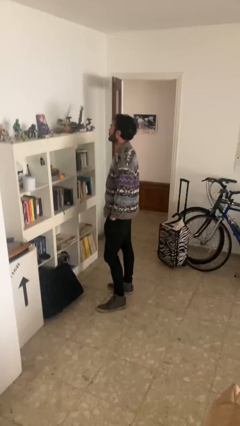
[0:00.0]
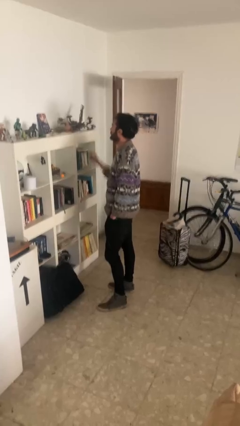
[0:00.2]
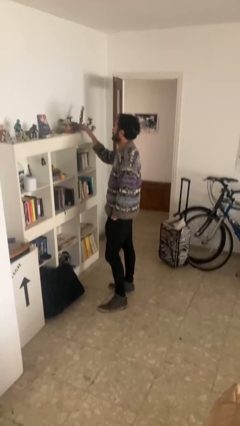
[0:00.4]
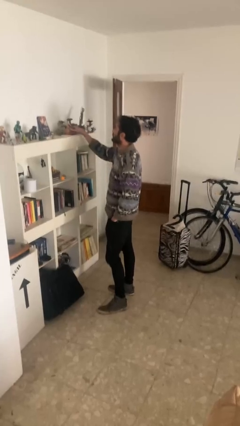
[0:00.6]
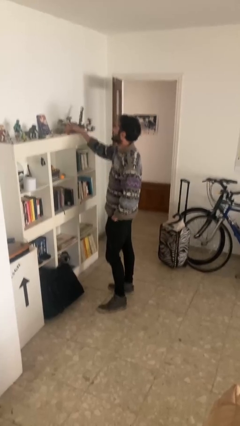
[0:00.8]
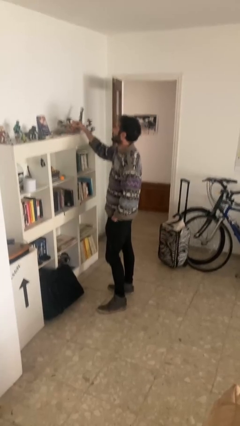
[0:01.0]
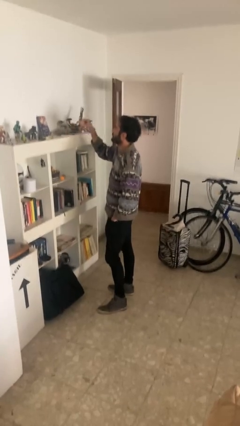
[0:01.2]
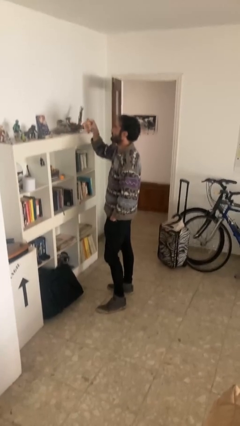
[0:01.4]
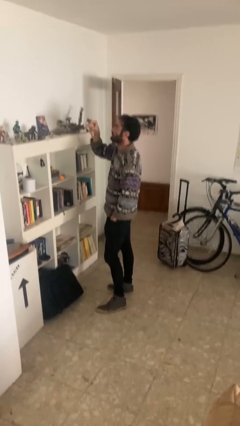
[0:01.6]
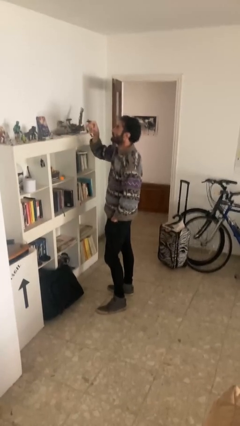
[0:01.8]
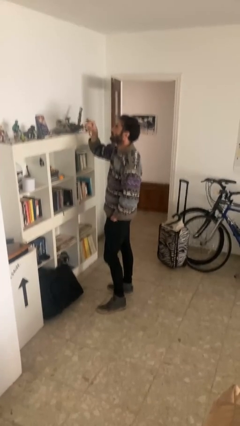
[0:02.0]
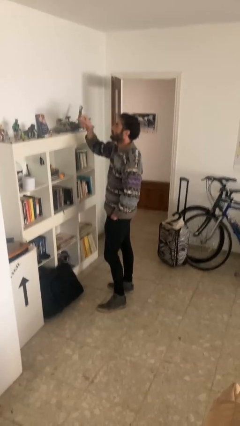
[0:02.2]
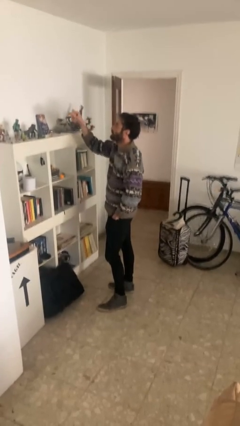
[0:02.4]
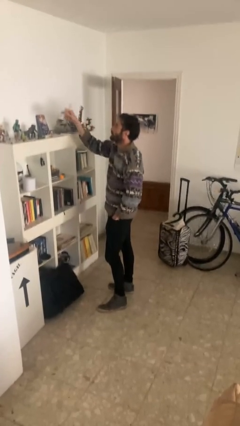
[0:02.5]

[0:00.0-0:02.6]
person picks up object from shelf

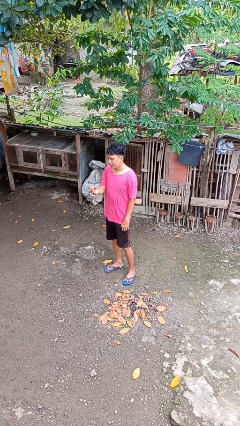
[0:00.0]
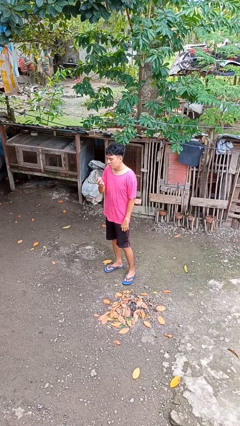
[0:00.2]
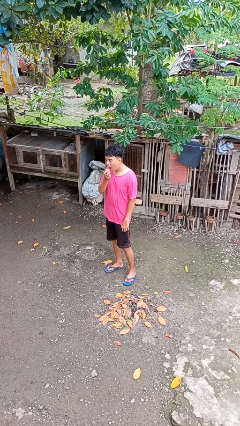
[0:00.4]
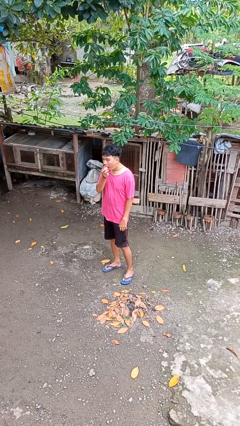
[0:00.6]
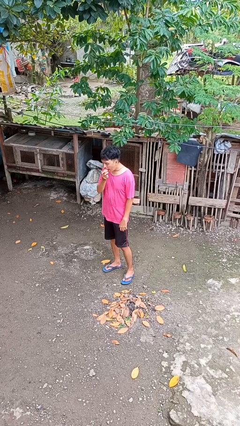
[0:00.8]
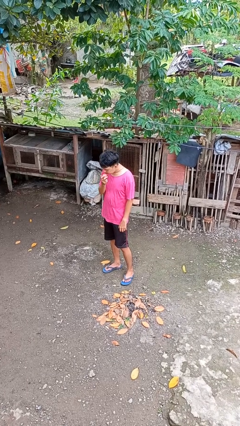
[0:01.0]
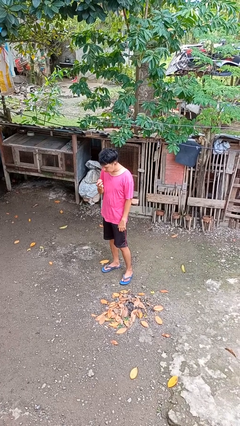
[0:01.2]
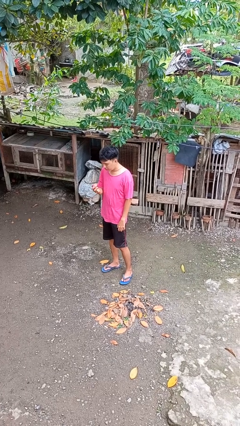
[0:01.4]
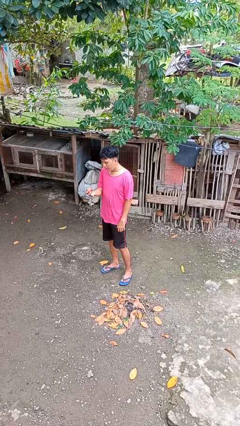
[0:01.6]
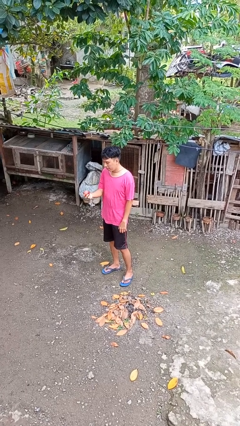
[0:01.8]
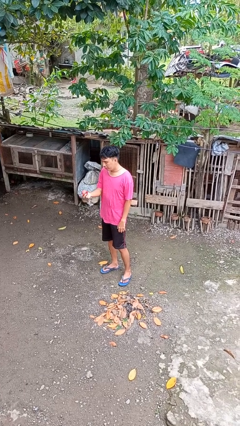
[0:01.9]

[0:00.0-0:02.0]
person eats apple

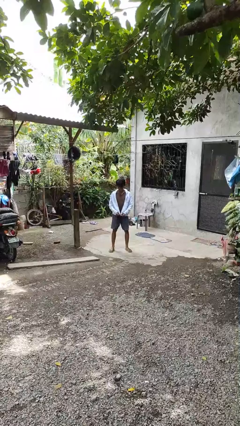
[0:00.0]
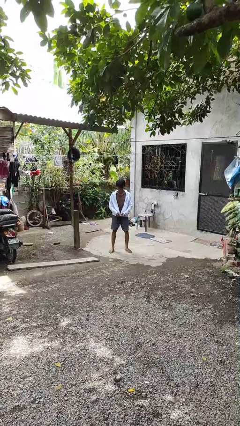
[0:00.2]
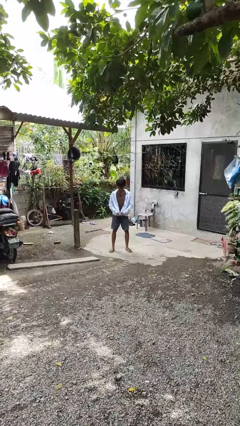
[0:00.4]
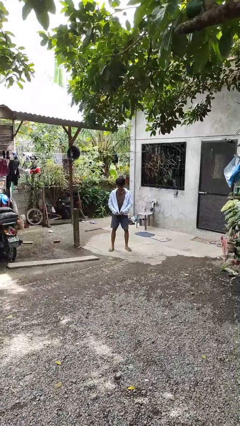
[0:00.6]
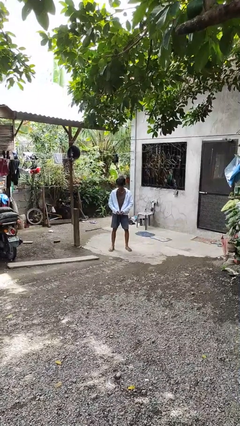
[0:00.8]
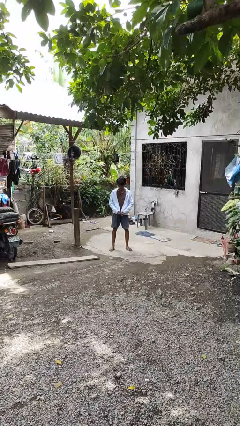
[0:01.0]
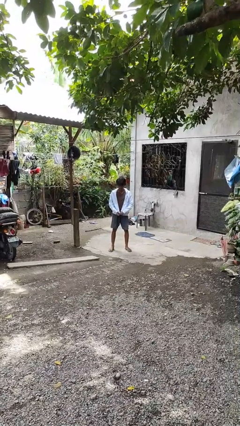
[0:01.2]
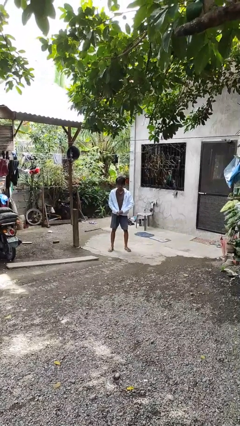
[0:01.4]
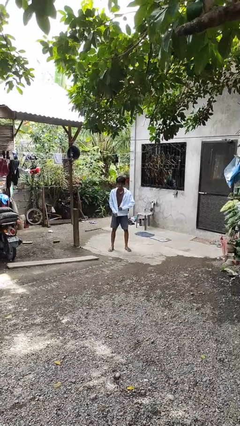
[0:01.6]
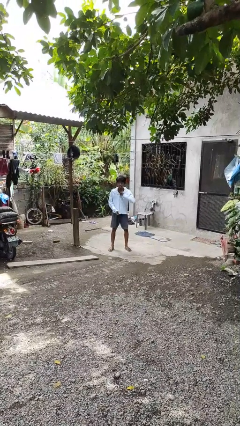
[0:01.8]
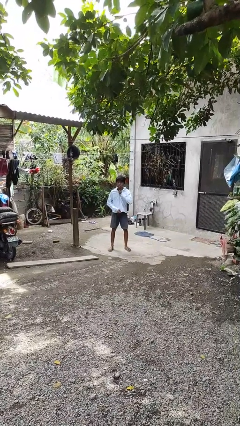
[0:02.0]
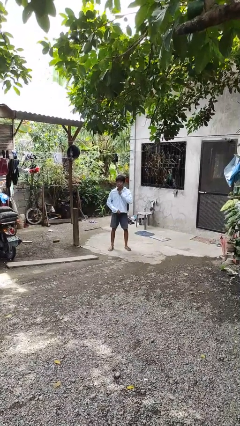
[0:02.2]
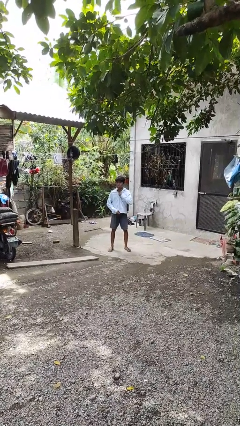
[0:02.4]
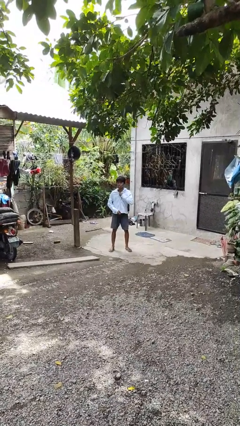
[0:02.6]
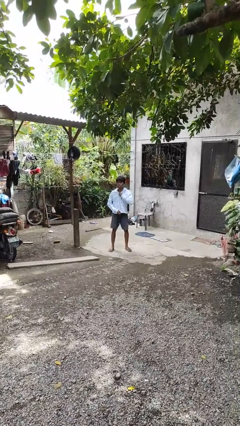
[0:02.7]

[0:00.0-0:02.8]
person zips up jacket

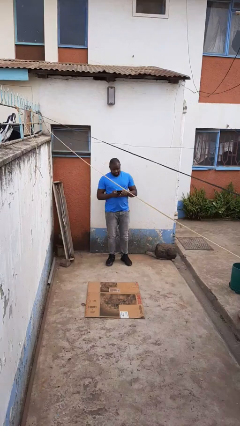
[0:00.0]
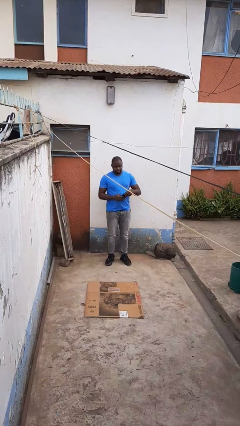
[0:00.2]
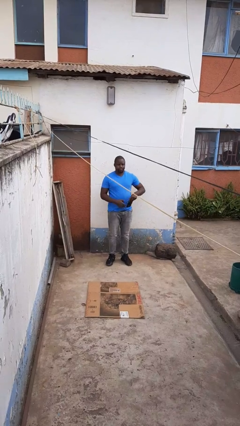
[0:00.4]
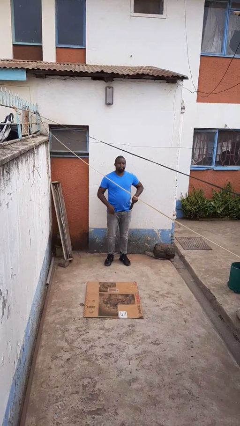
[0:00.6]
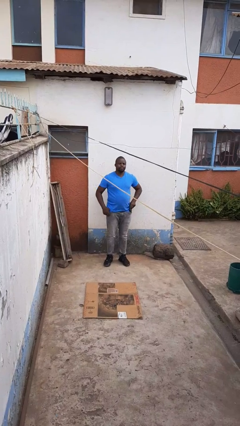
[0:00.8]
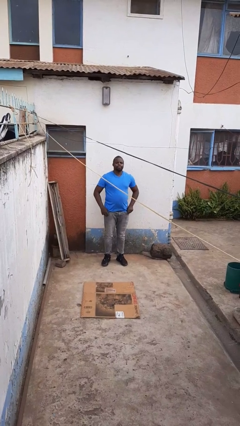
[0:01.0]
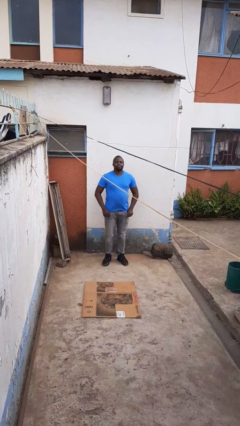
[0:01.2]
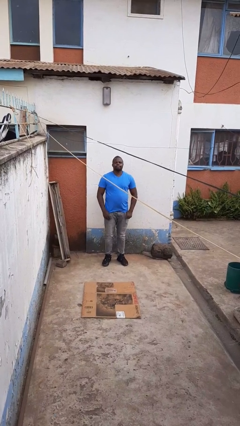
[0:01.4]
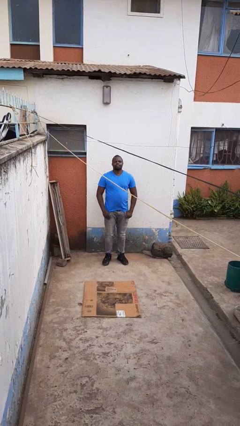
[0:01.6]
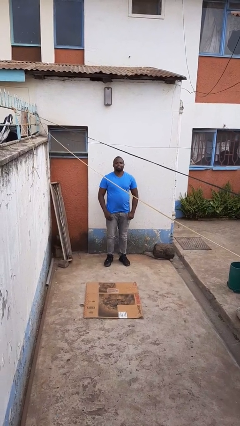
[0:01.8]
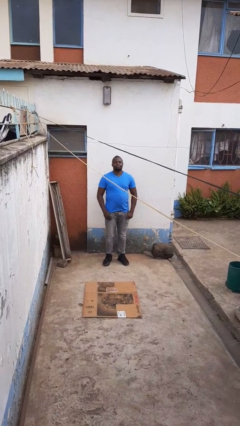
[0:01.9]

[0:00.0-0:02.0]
person puts phone into pocket

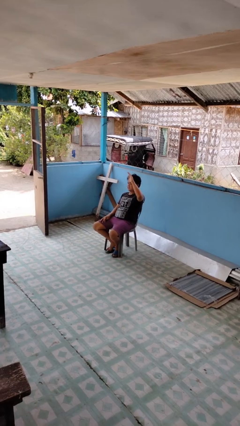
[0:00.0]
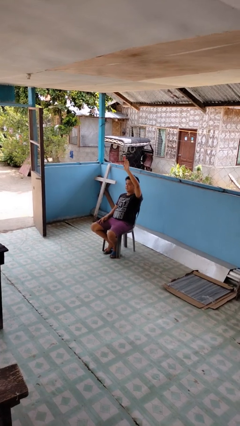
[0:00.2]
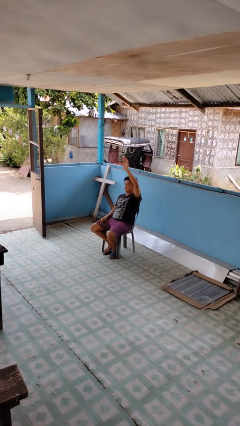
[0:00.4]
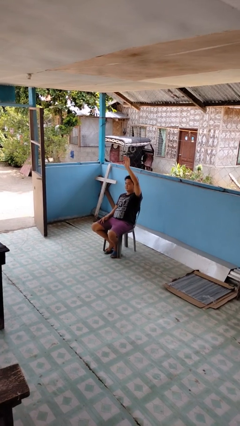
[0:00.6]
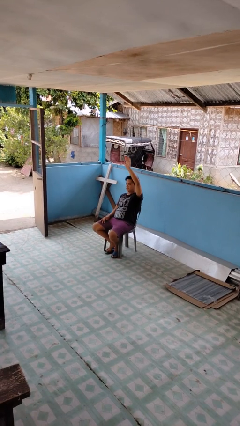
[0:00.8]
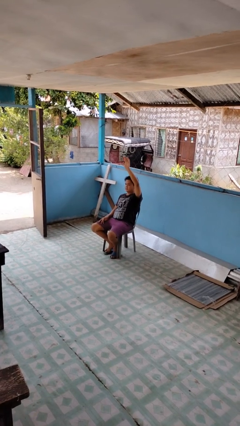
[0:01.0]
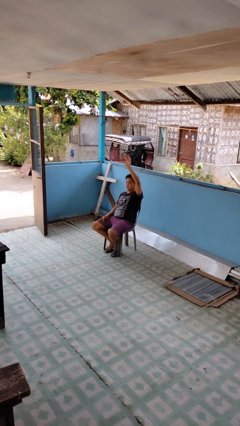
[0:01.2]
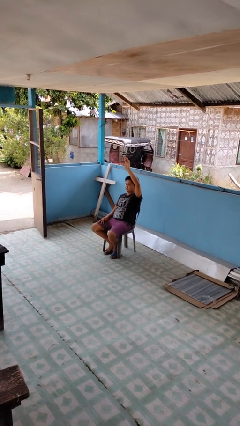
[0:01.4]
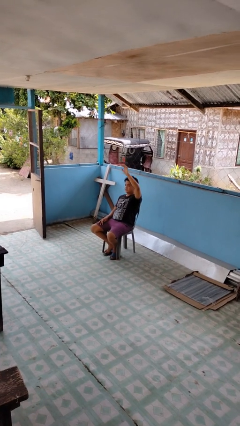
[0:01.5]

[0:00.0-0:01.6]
person gestures raise hand

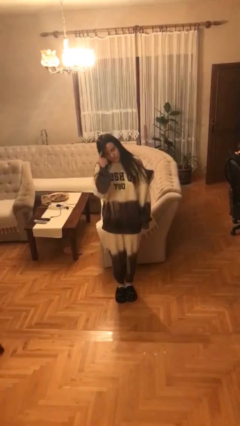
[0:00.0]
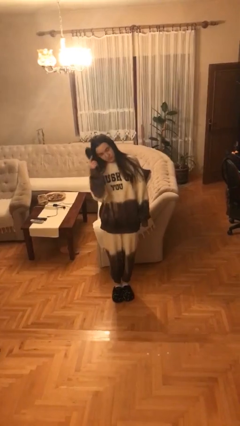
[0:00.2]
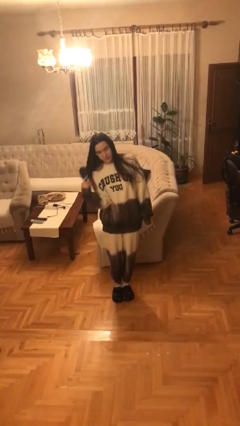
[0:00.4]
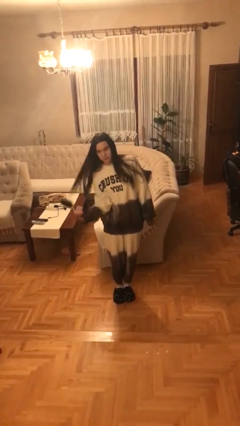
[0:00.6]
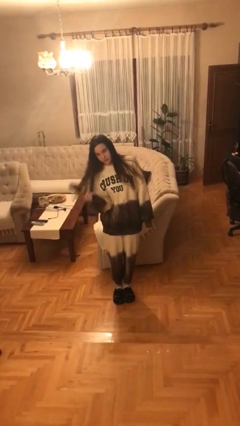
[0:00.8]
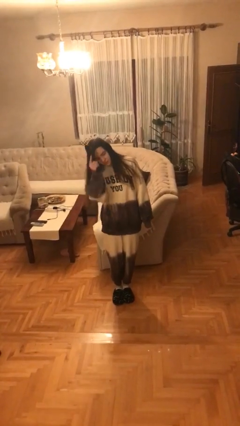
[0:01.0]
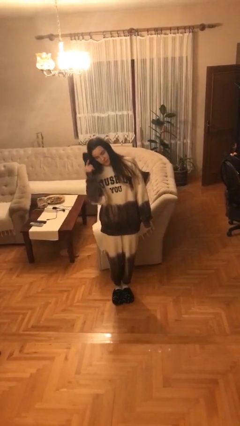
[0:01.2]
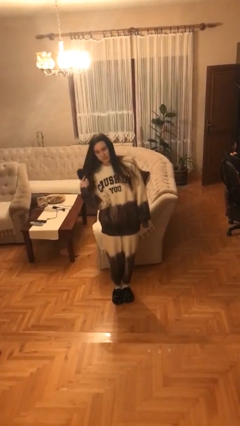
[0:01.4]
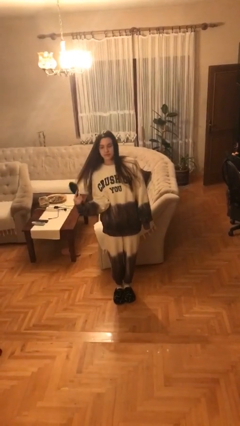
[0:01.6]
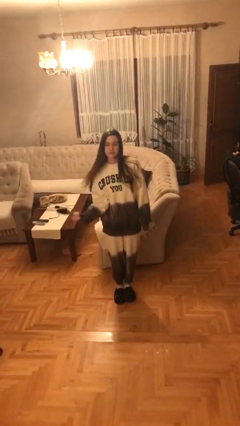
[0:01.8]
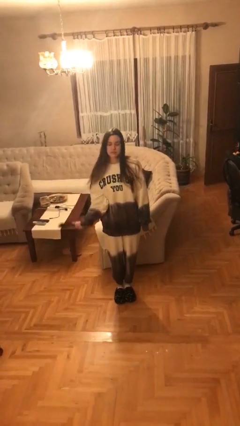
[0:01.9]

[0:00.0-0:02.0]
person brushes hair

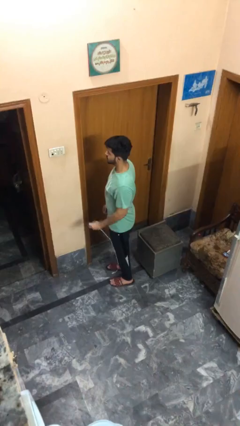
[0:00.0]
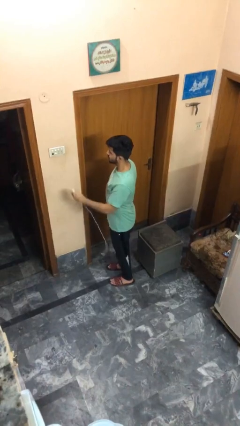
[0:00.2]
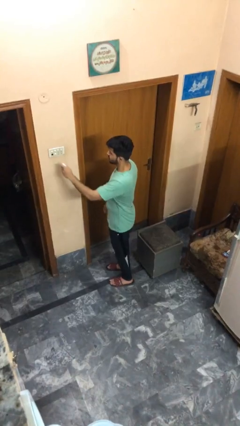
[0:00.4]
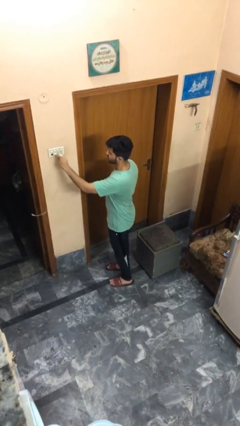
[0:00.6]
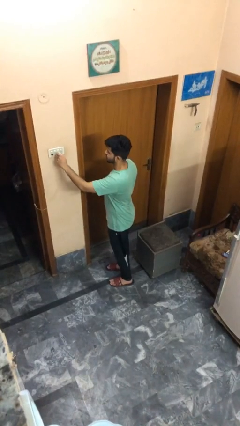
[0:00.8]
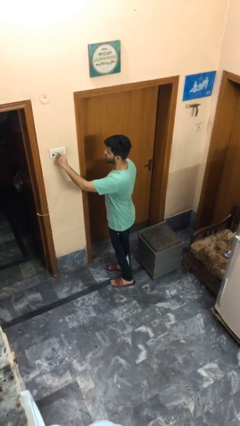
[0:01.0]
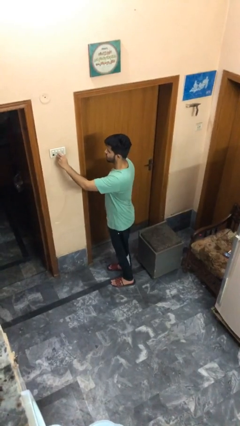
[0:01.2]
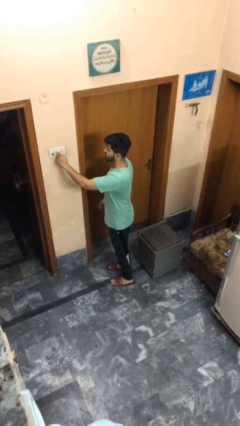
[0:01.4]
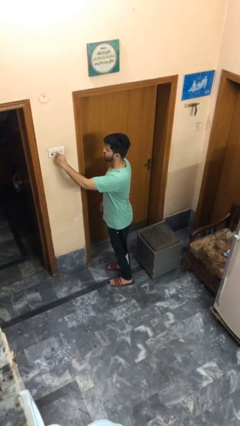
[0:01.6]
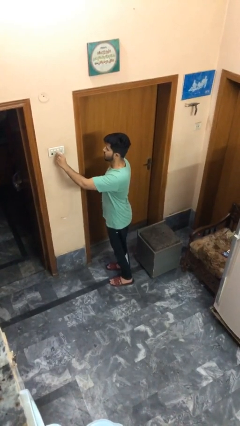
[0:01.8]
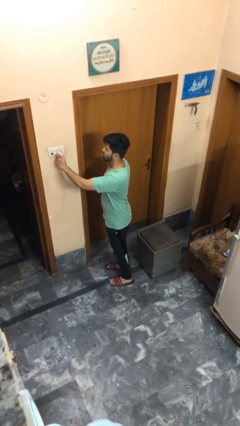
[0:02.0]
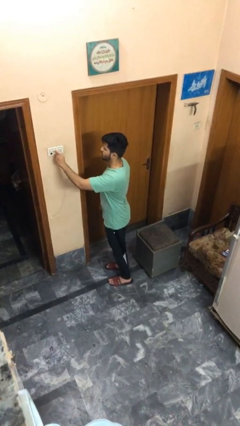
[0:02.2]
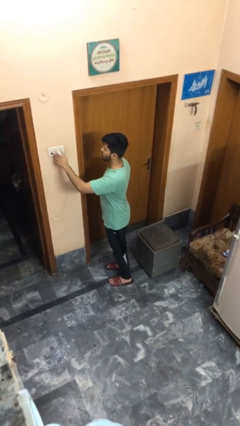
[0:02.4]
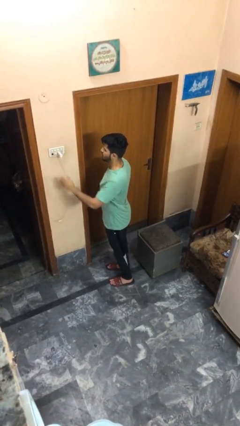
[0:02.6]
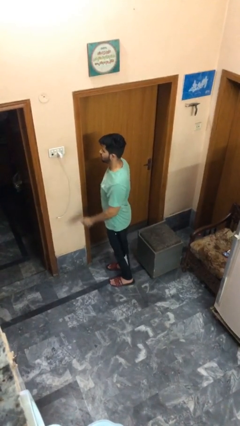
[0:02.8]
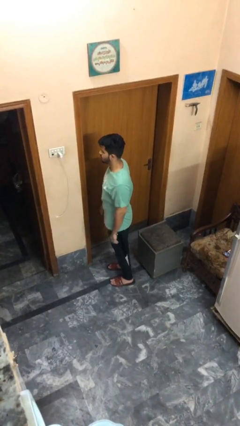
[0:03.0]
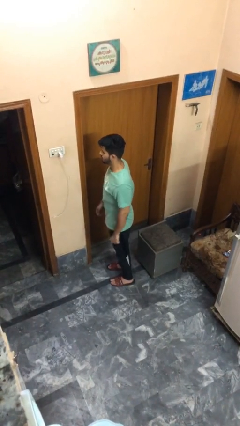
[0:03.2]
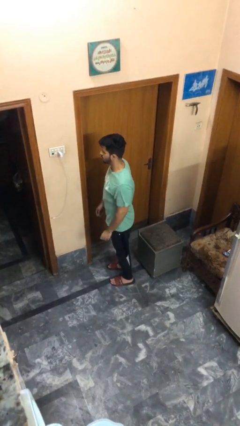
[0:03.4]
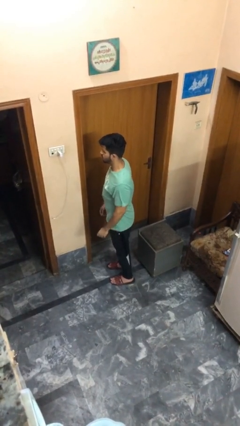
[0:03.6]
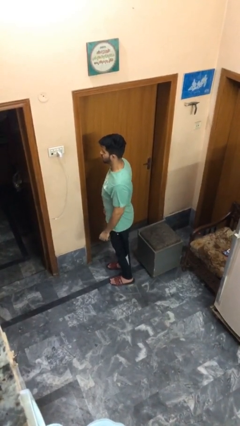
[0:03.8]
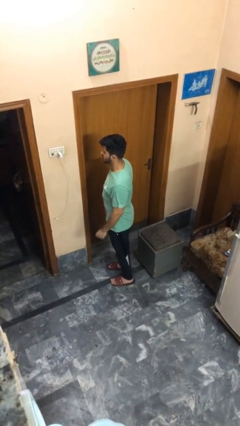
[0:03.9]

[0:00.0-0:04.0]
person plugs into electrical socket
